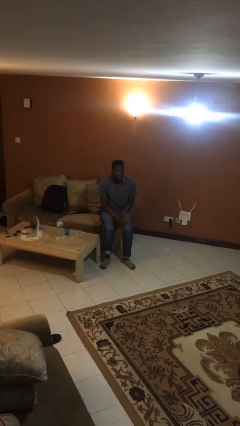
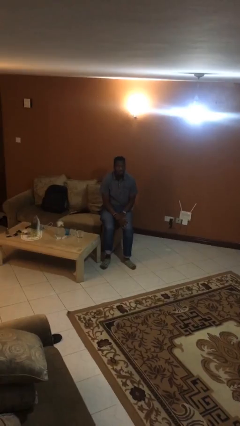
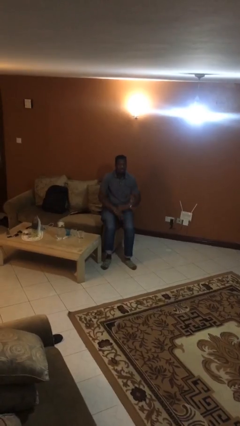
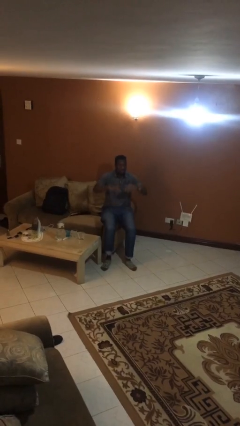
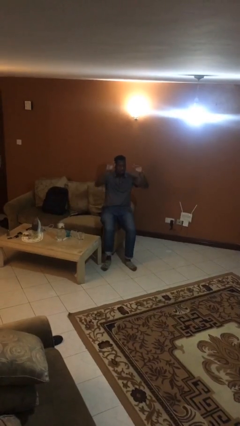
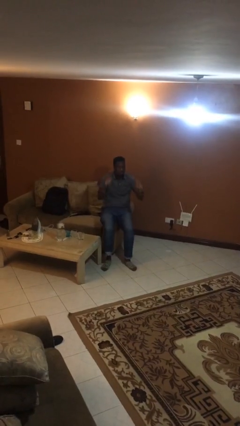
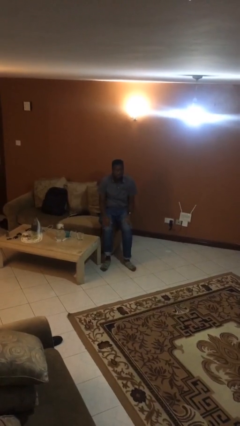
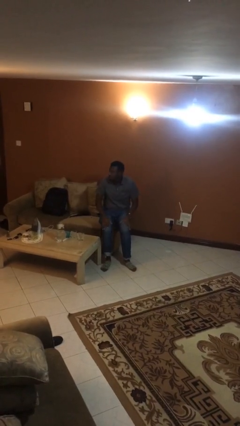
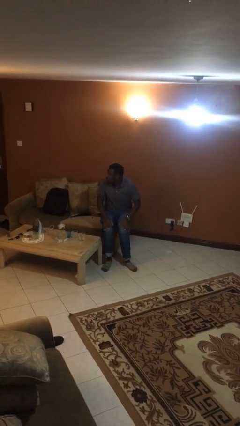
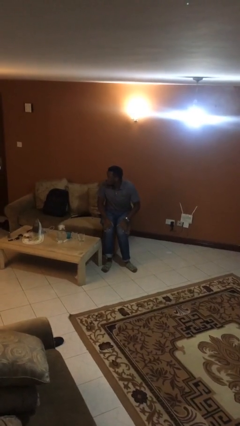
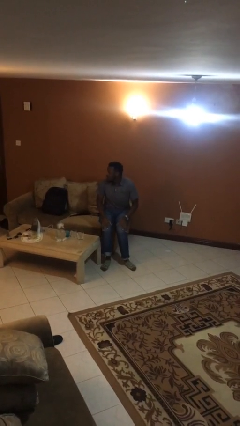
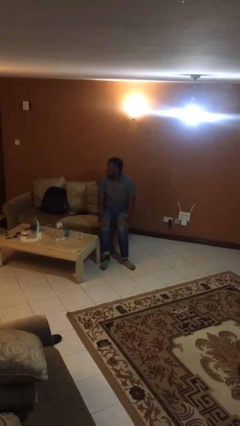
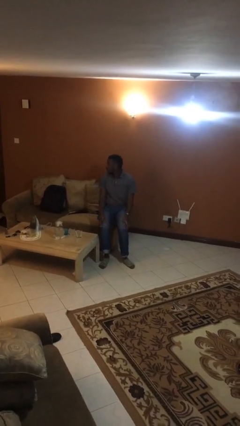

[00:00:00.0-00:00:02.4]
person slaps hands on thighs

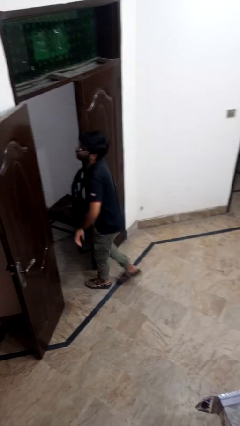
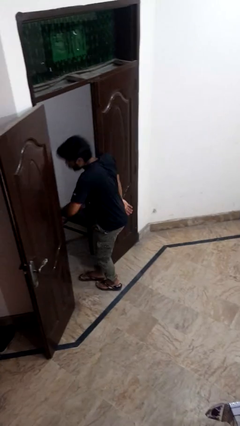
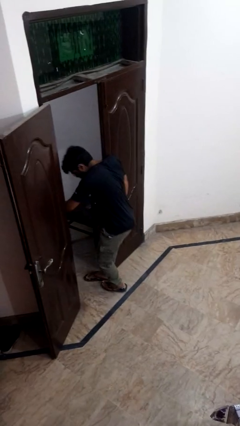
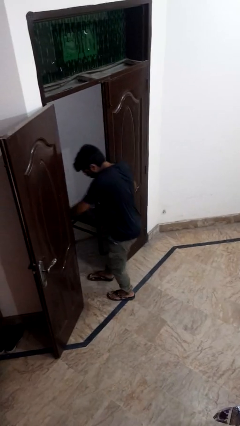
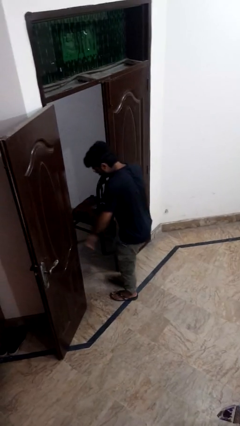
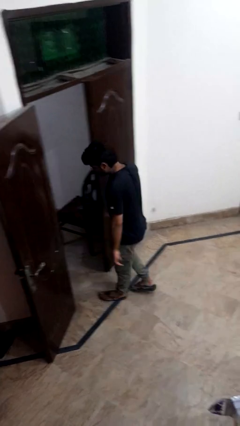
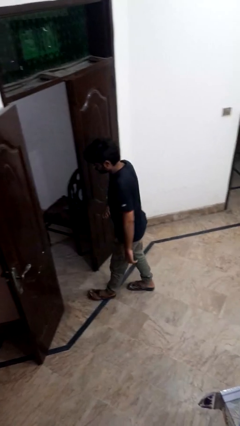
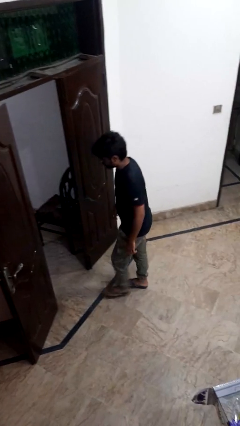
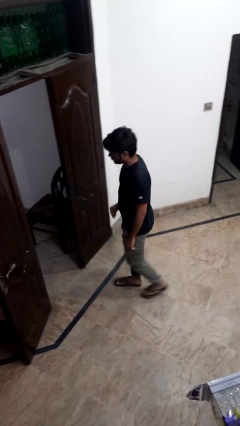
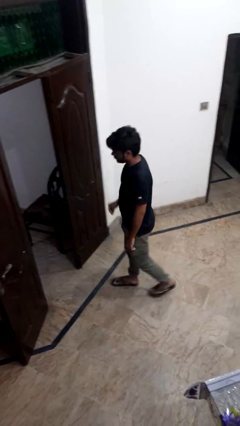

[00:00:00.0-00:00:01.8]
person bumps into wall

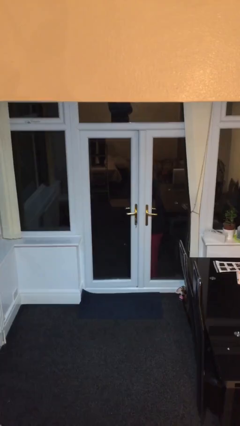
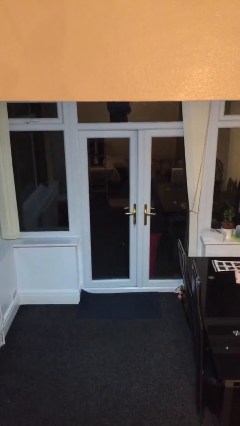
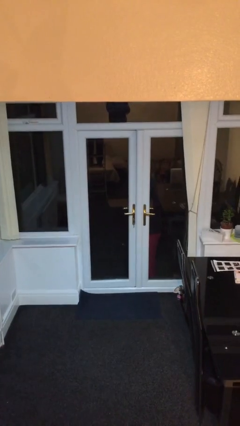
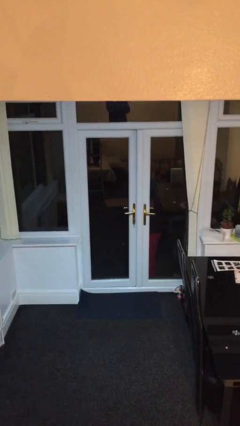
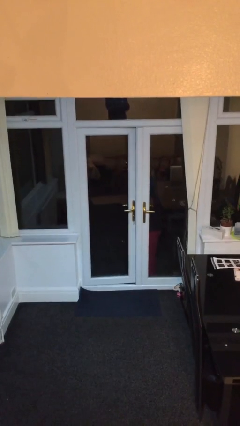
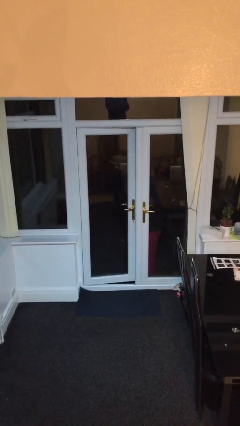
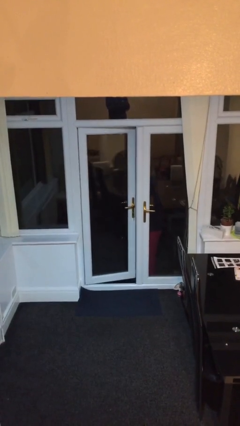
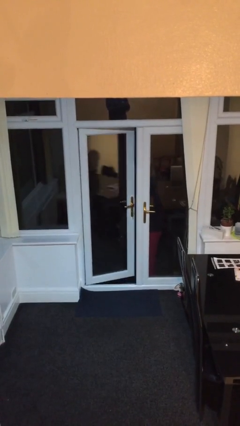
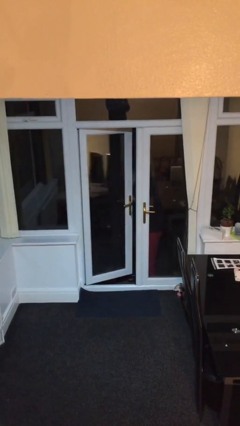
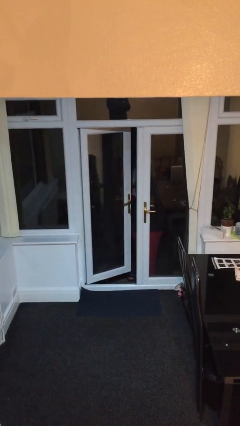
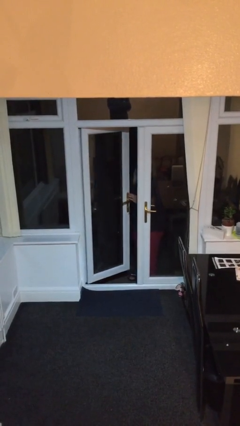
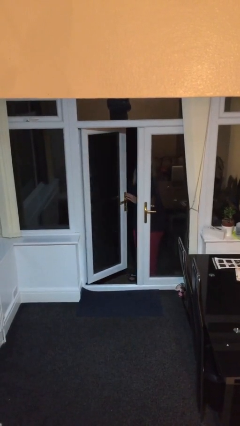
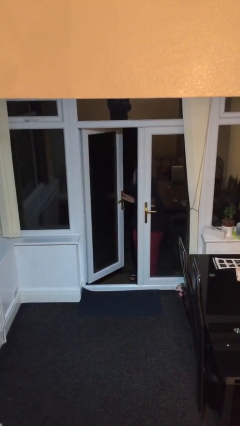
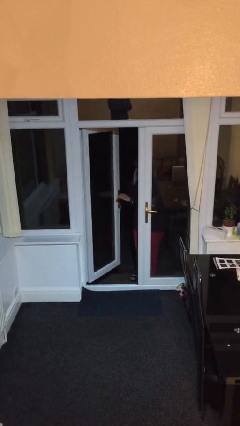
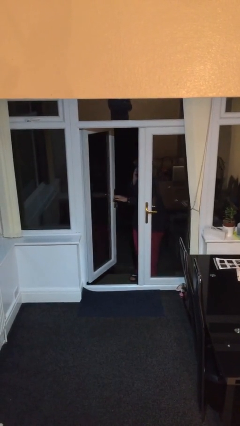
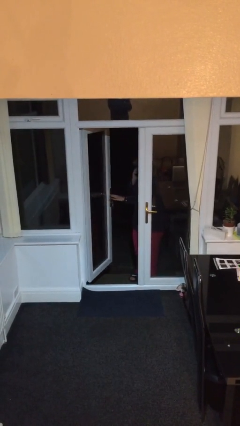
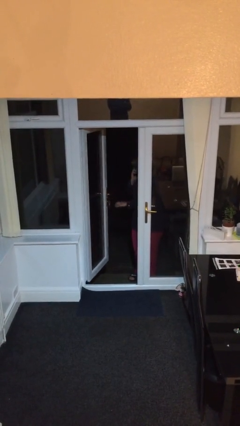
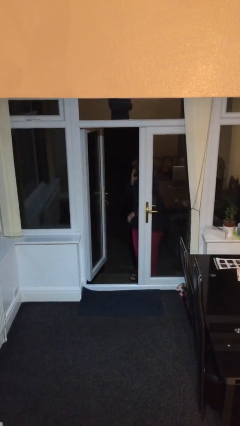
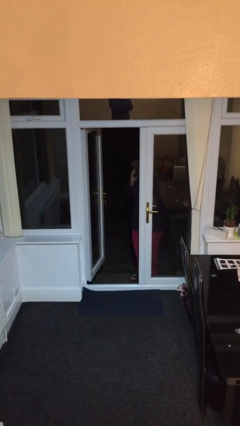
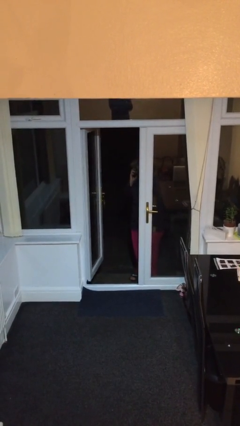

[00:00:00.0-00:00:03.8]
person opens facility door

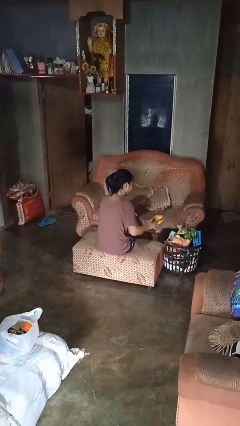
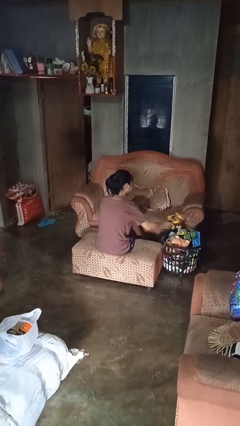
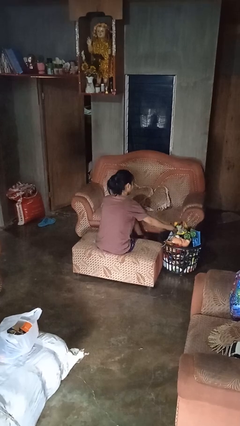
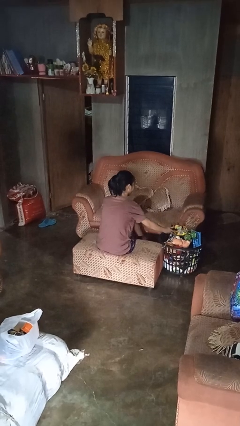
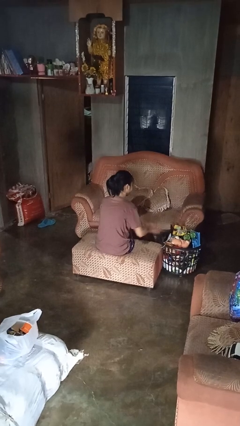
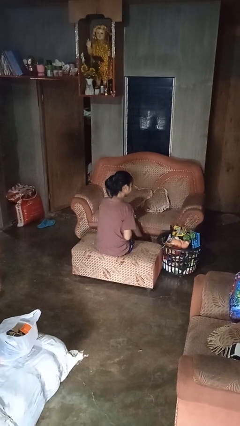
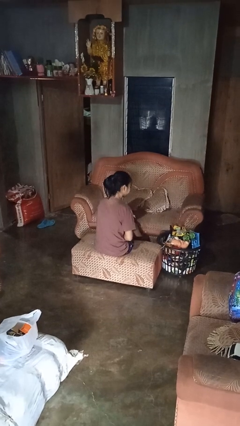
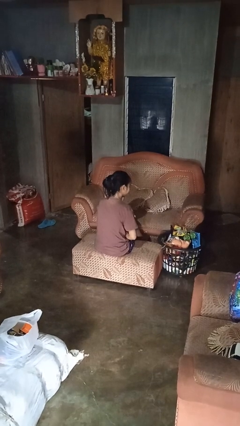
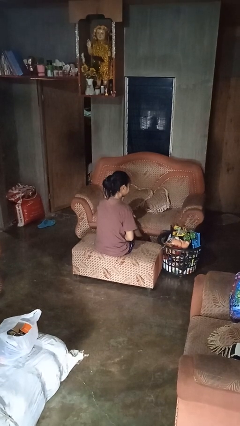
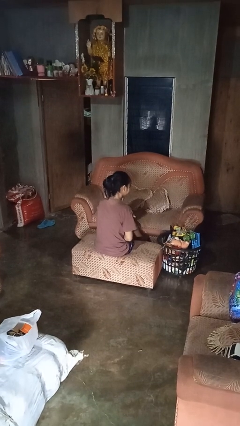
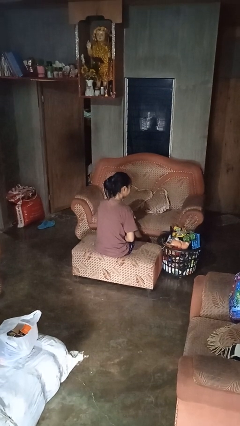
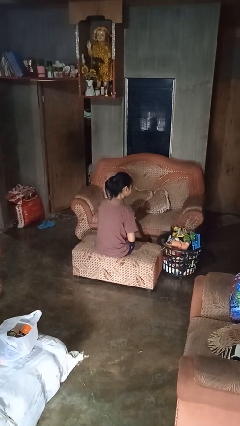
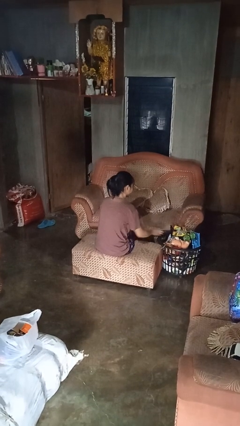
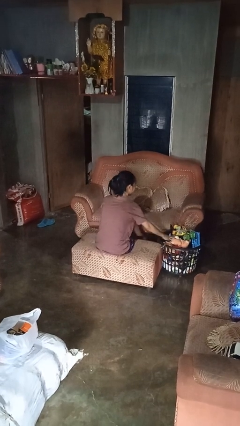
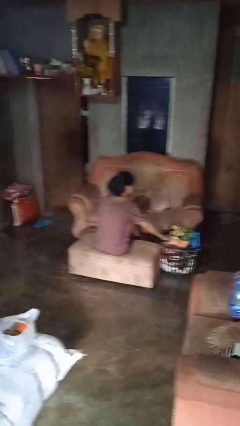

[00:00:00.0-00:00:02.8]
person puts object into basket

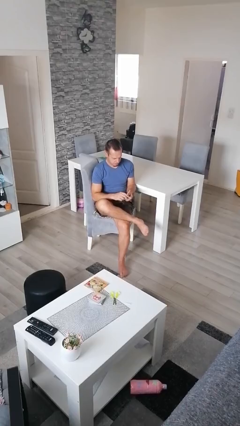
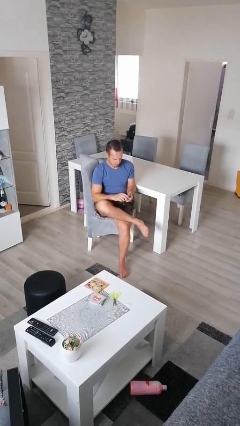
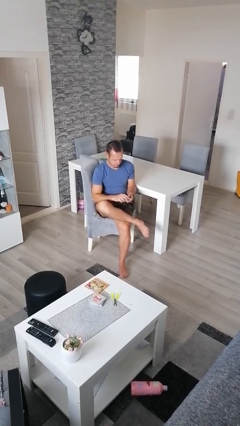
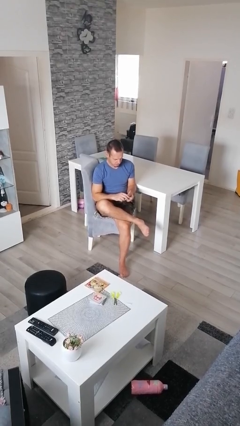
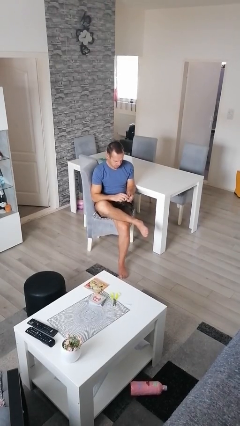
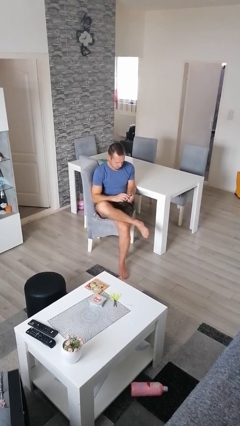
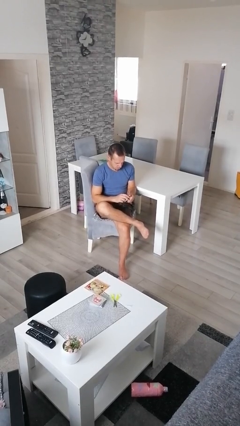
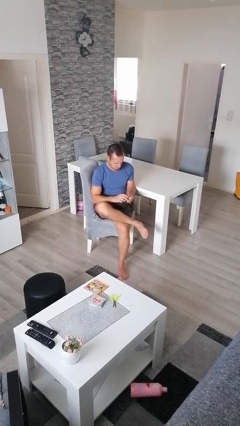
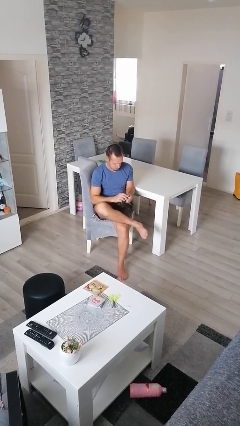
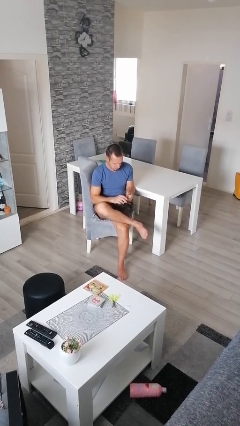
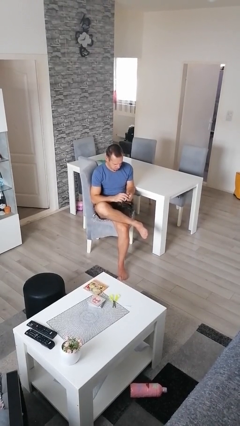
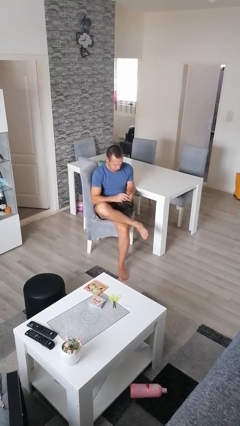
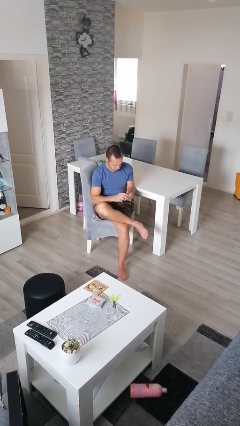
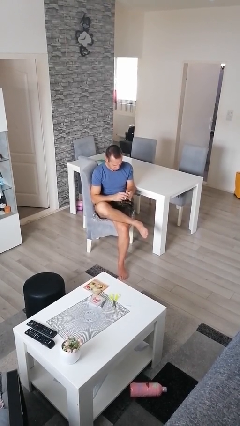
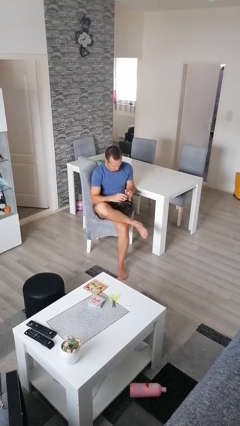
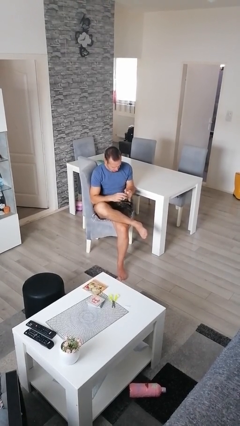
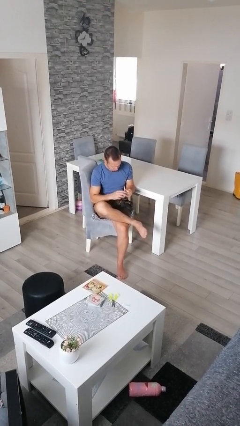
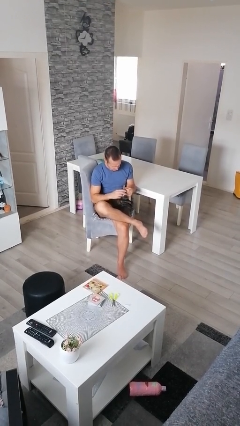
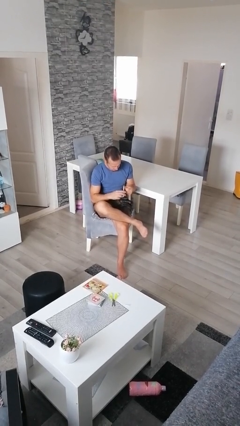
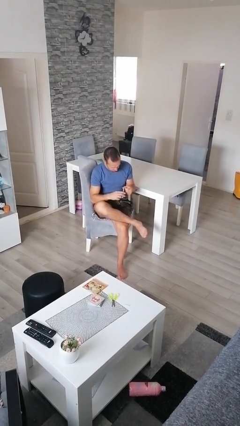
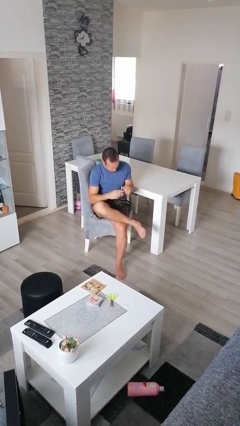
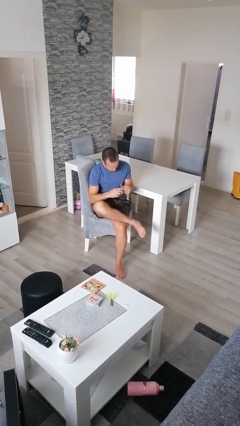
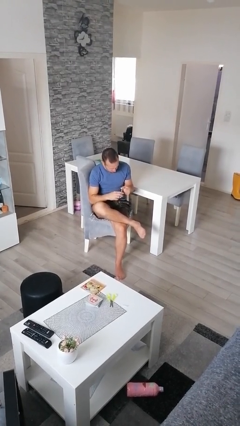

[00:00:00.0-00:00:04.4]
person files fingernails

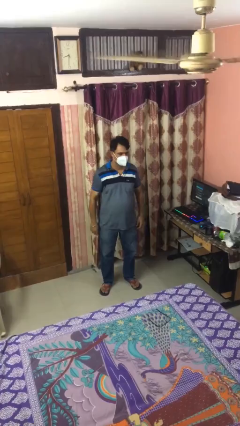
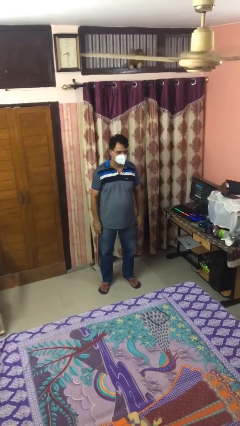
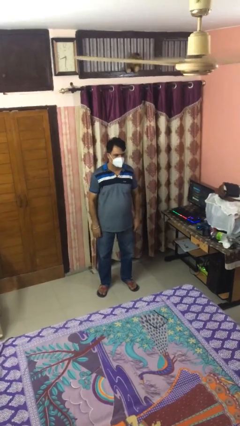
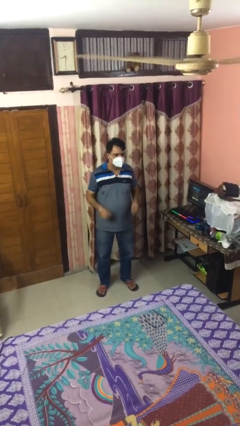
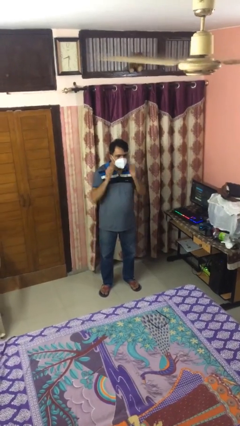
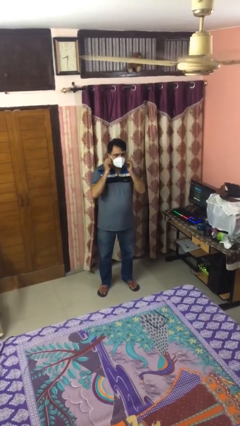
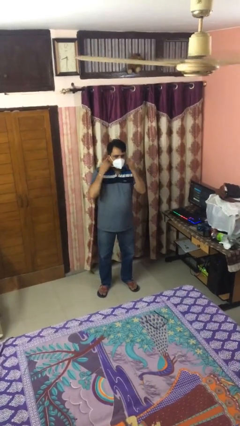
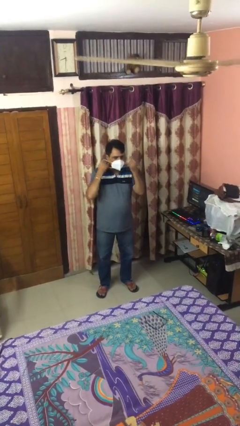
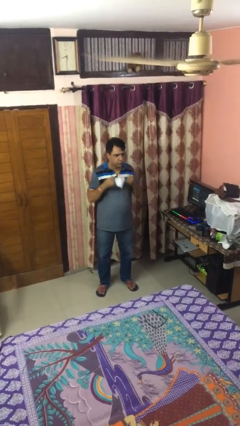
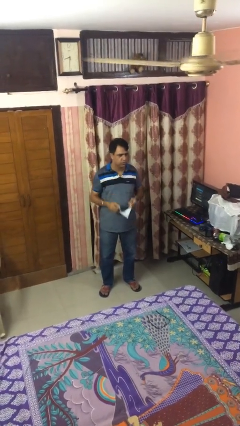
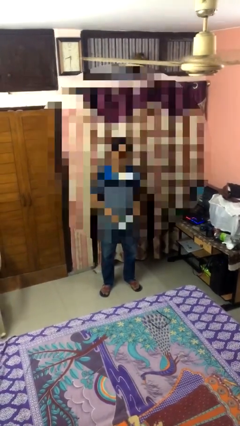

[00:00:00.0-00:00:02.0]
person takes off facemask
